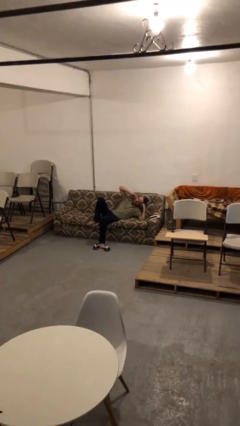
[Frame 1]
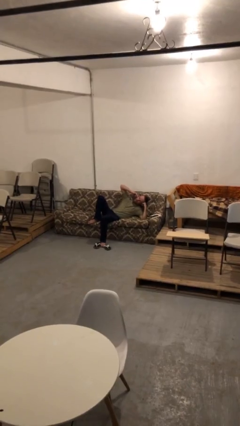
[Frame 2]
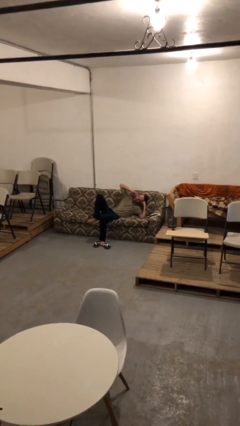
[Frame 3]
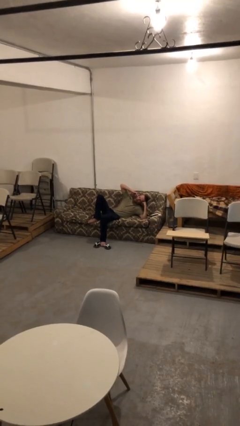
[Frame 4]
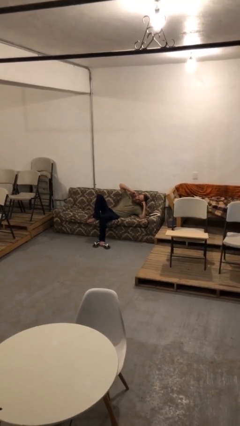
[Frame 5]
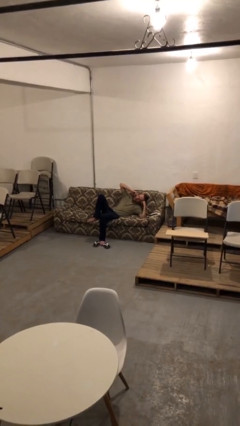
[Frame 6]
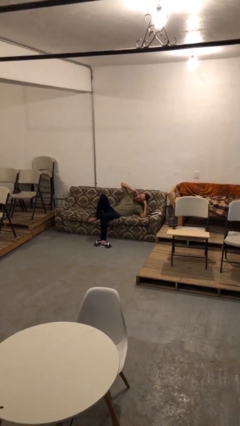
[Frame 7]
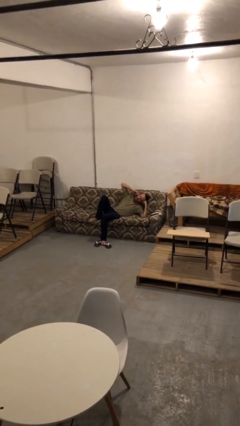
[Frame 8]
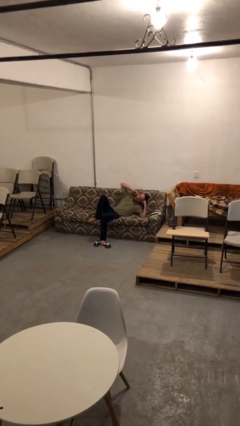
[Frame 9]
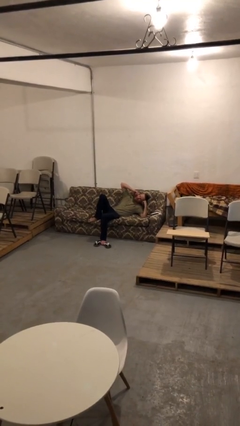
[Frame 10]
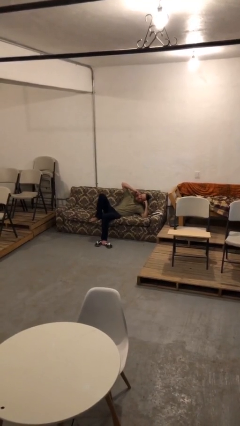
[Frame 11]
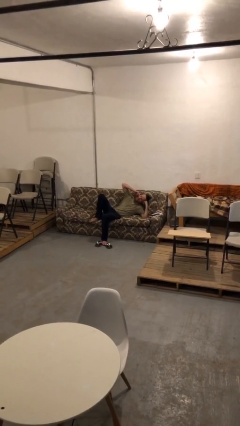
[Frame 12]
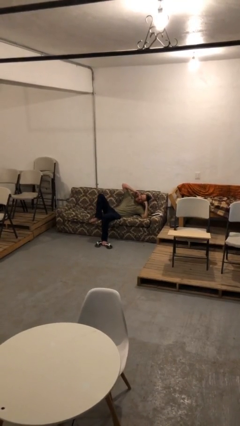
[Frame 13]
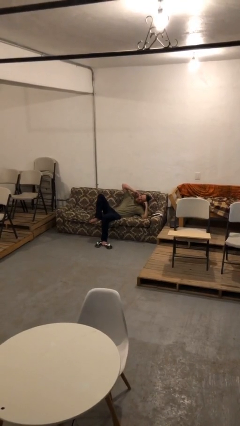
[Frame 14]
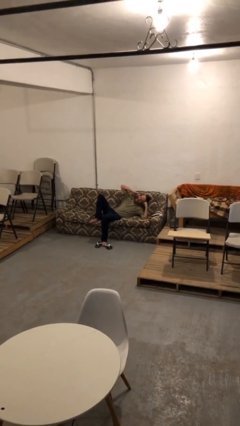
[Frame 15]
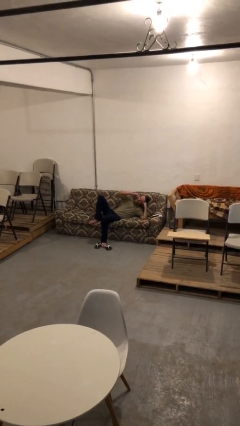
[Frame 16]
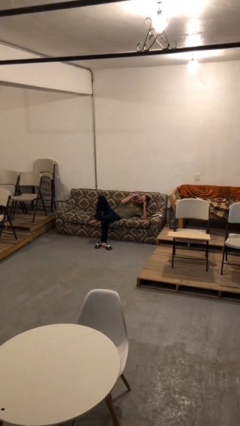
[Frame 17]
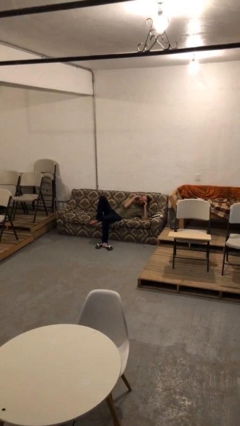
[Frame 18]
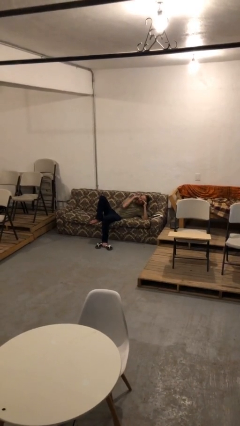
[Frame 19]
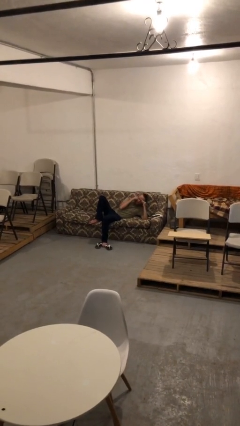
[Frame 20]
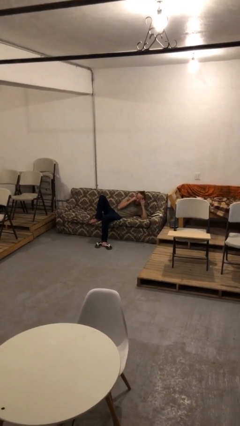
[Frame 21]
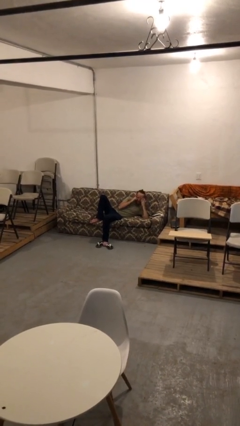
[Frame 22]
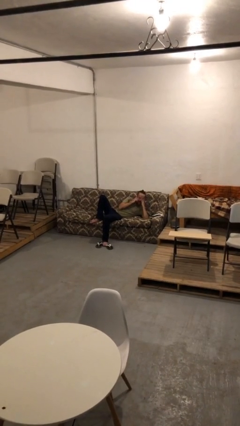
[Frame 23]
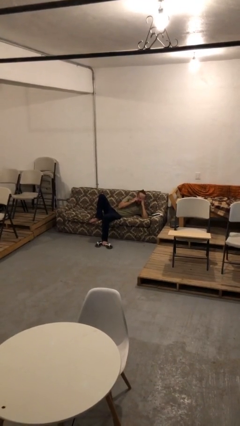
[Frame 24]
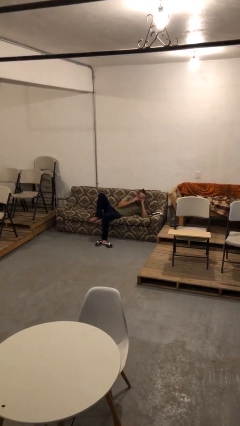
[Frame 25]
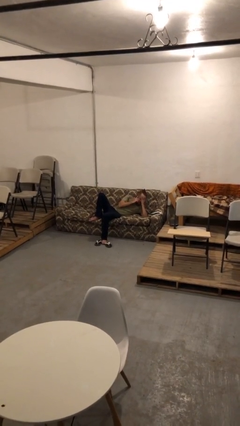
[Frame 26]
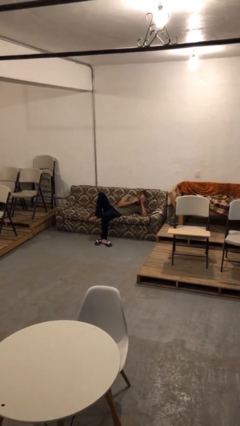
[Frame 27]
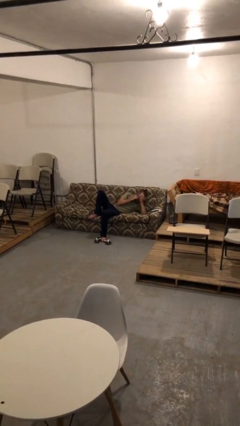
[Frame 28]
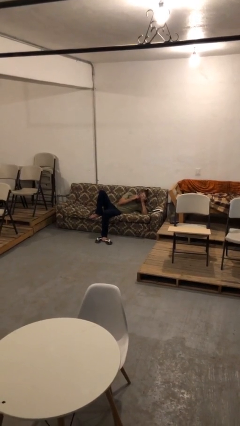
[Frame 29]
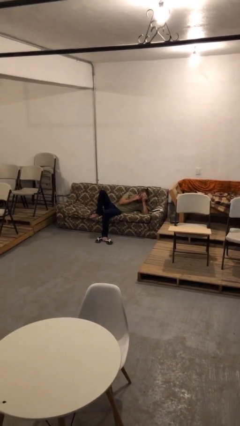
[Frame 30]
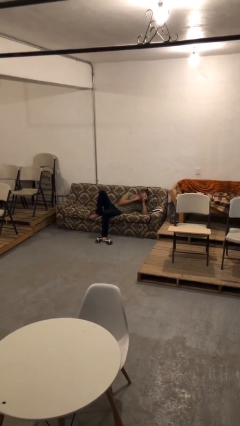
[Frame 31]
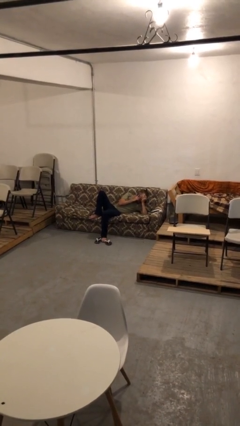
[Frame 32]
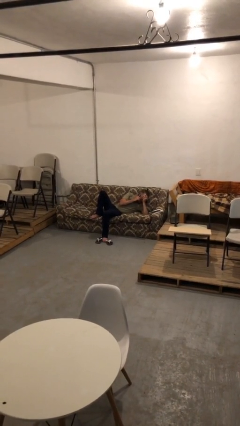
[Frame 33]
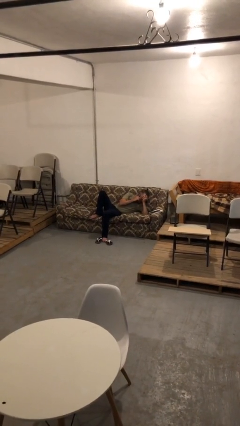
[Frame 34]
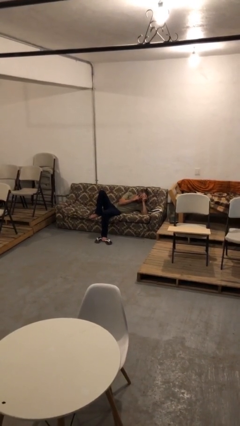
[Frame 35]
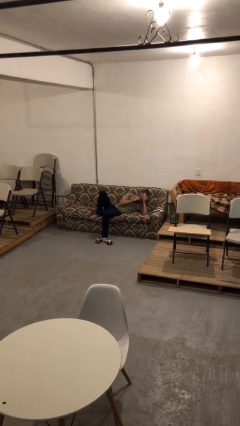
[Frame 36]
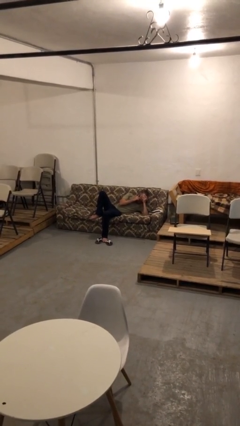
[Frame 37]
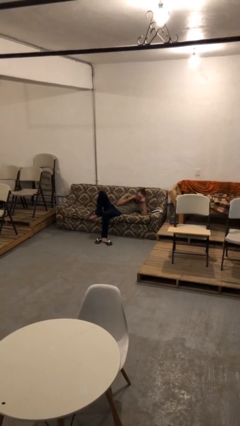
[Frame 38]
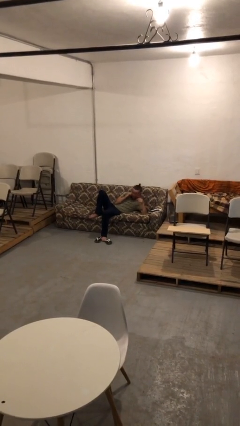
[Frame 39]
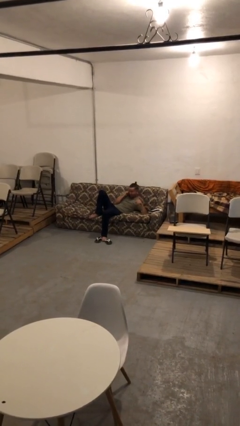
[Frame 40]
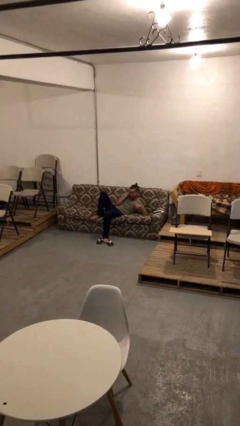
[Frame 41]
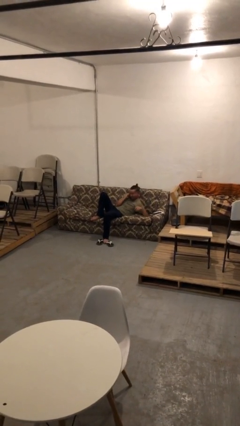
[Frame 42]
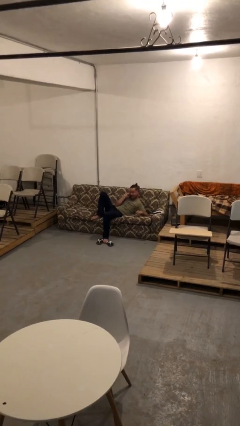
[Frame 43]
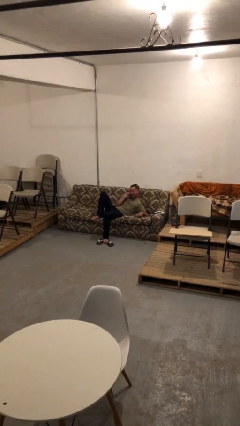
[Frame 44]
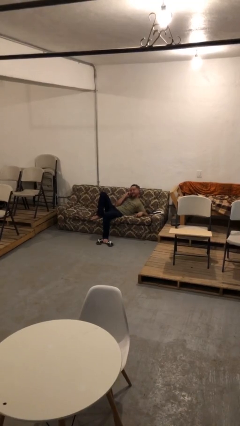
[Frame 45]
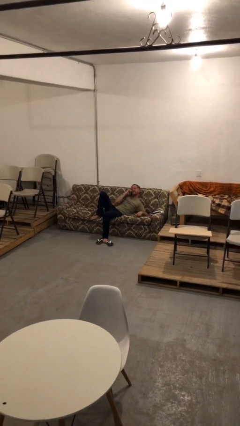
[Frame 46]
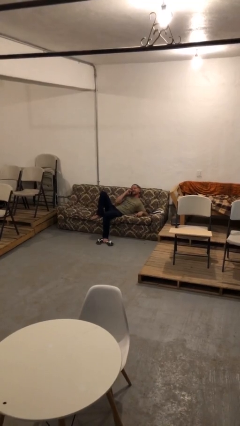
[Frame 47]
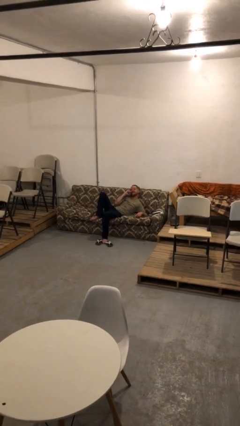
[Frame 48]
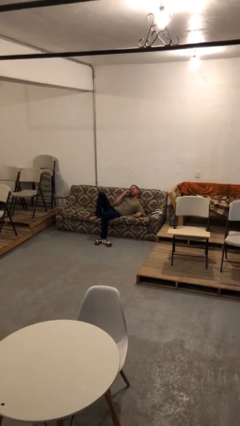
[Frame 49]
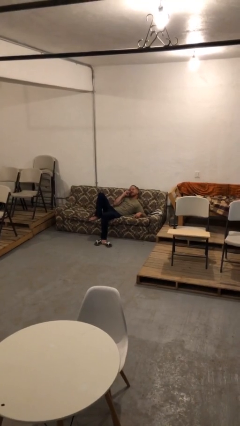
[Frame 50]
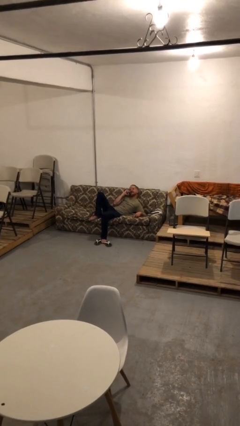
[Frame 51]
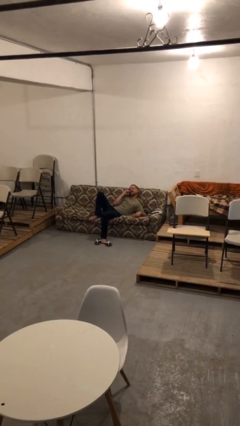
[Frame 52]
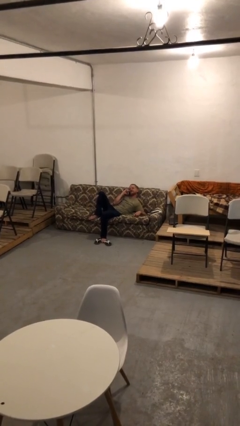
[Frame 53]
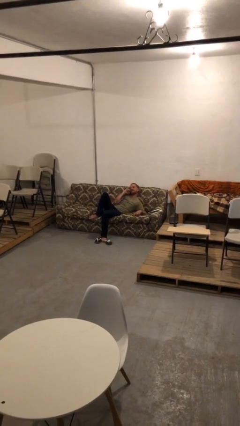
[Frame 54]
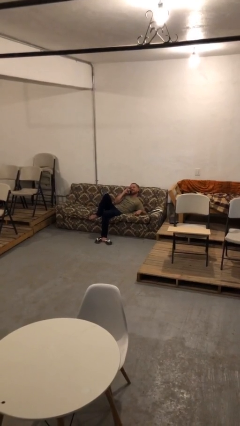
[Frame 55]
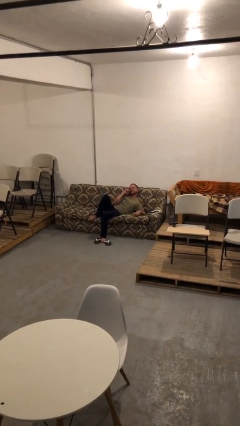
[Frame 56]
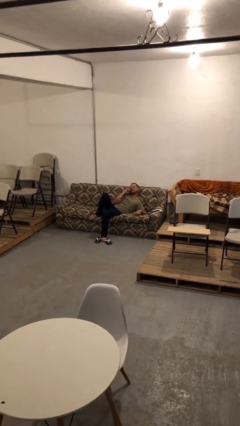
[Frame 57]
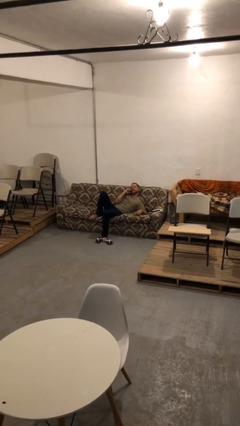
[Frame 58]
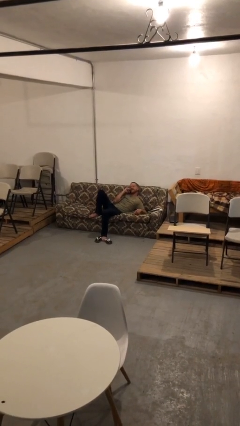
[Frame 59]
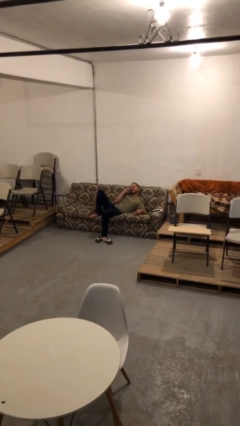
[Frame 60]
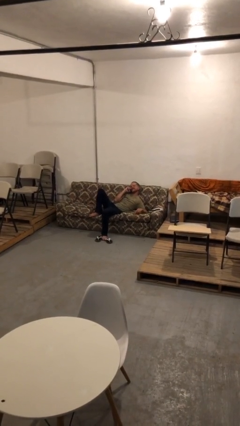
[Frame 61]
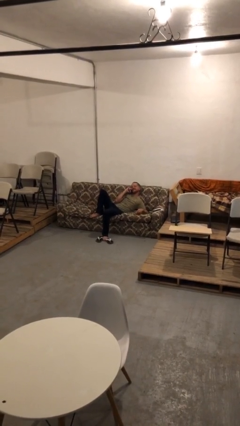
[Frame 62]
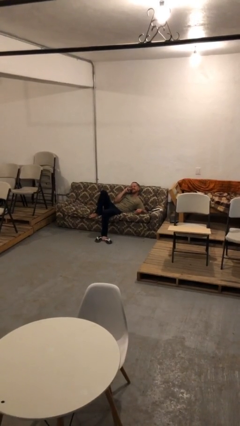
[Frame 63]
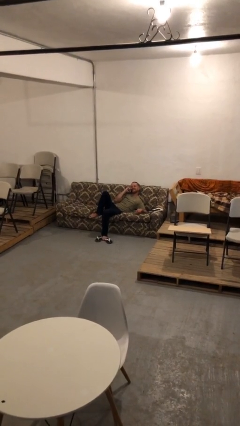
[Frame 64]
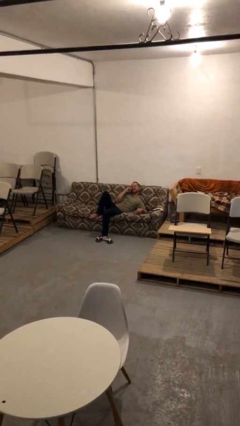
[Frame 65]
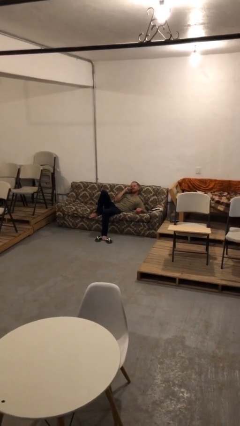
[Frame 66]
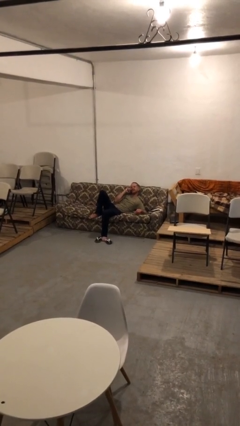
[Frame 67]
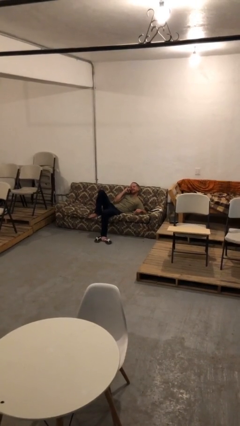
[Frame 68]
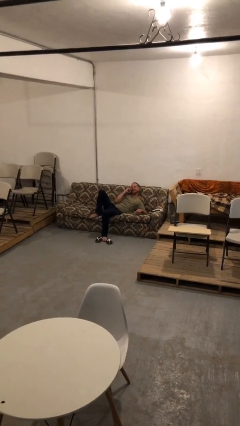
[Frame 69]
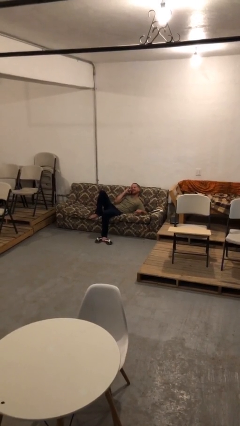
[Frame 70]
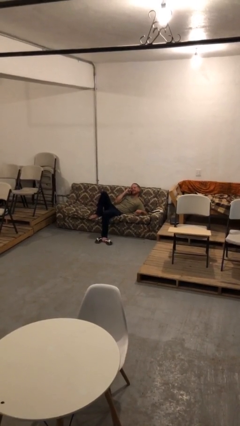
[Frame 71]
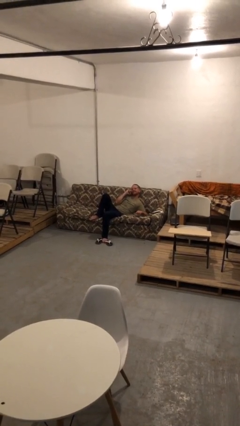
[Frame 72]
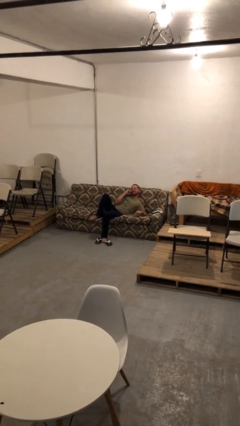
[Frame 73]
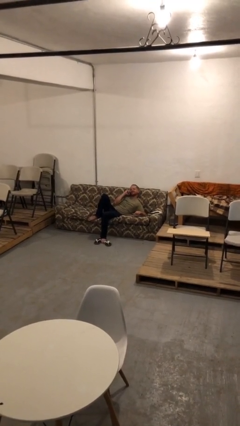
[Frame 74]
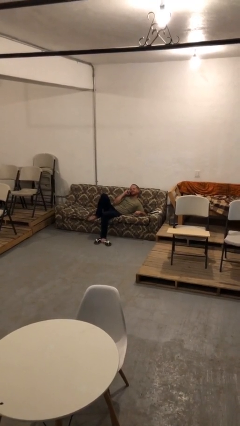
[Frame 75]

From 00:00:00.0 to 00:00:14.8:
person talks on phone

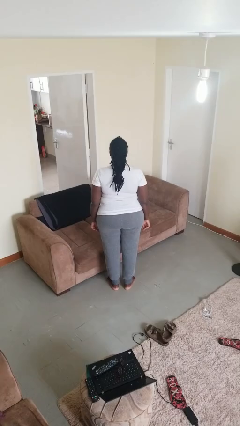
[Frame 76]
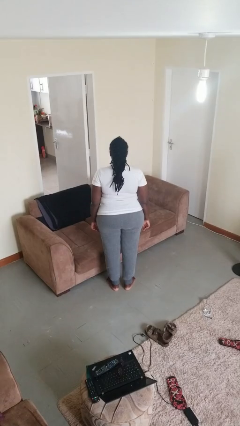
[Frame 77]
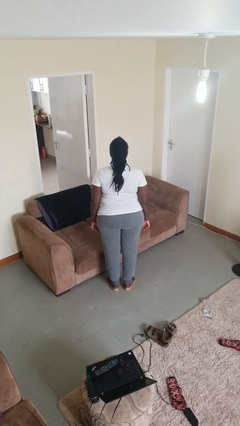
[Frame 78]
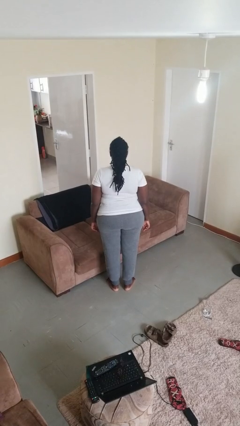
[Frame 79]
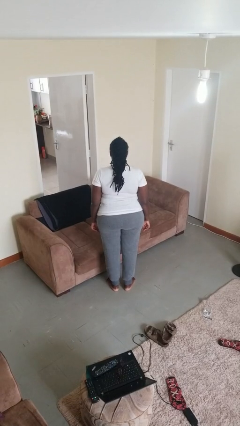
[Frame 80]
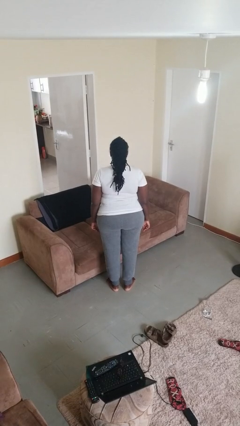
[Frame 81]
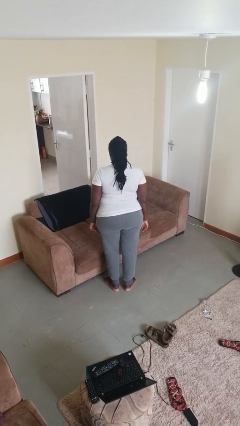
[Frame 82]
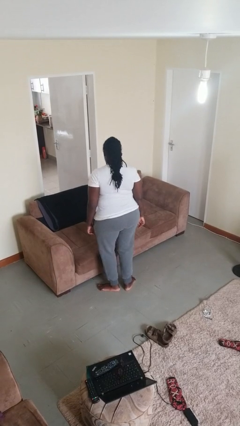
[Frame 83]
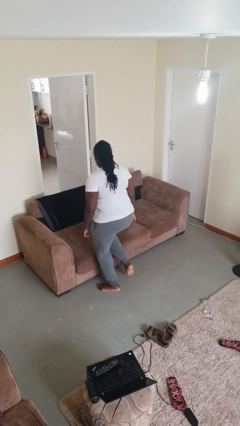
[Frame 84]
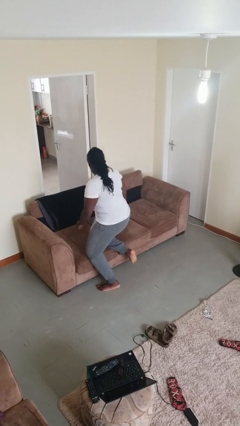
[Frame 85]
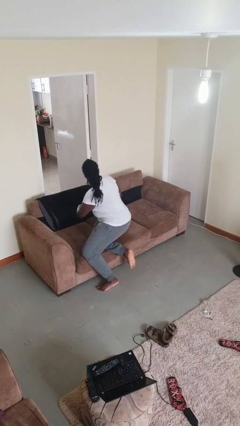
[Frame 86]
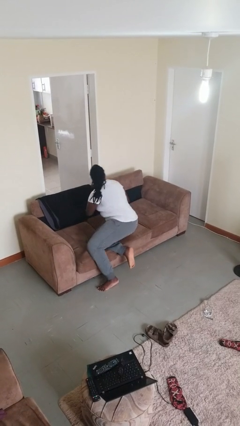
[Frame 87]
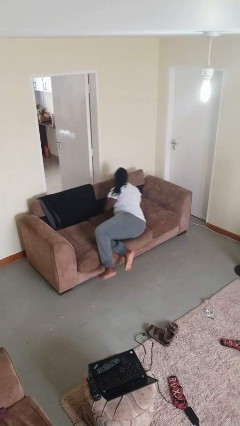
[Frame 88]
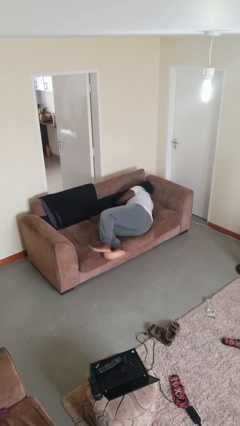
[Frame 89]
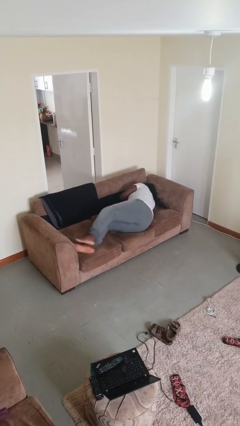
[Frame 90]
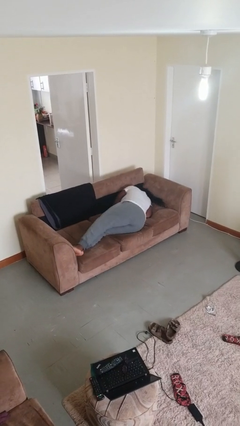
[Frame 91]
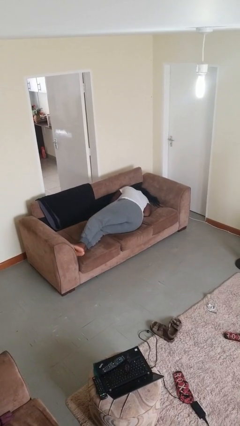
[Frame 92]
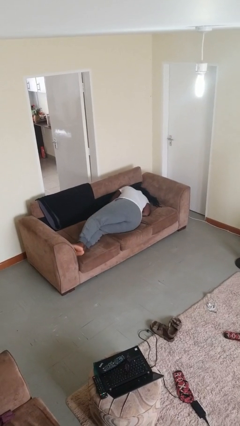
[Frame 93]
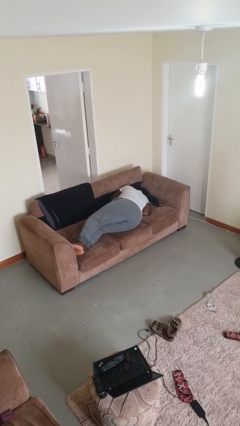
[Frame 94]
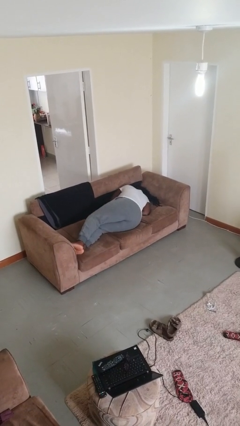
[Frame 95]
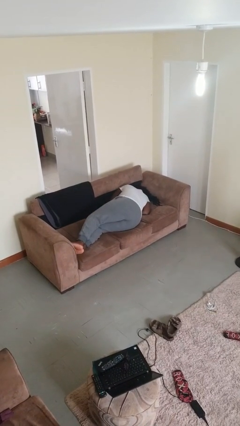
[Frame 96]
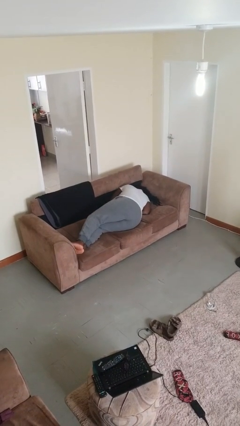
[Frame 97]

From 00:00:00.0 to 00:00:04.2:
person lies down on bed
